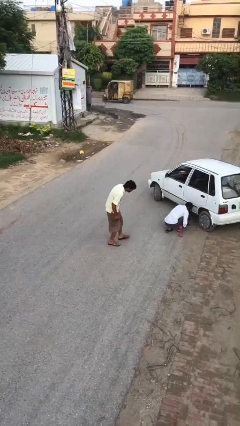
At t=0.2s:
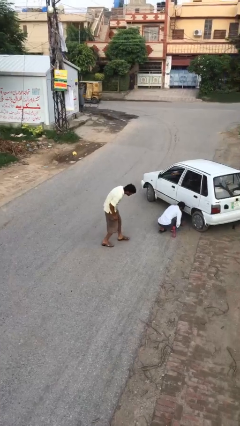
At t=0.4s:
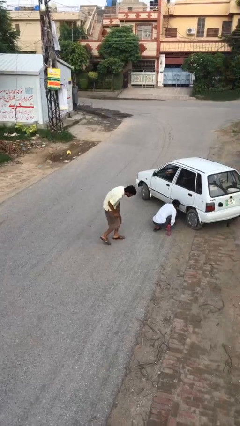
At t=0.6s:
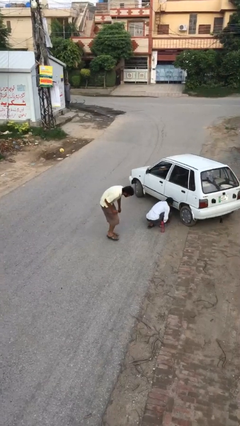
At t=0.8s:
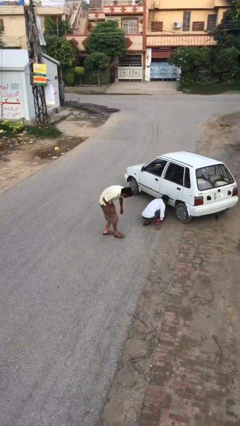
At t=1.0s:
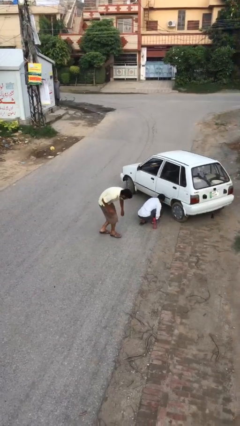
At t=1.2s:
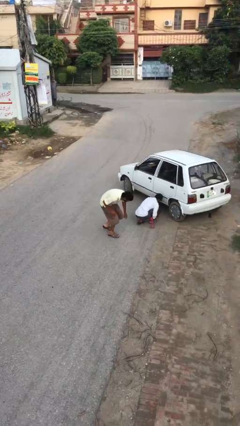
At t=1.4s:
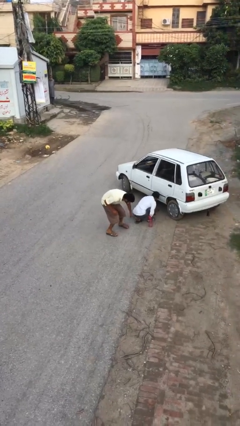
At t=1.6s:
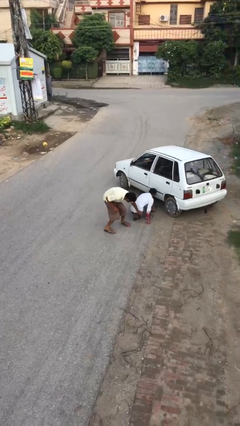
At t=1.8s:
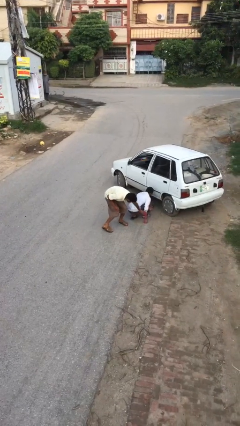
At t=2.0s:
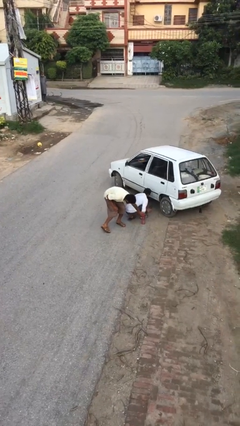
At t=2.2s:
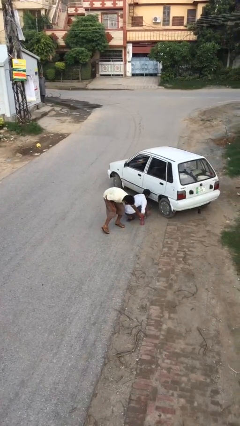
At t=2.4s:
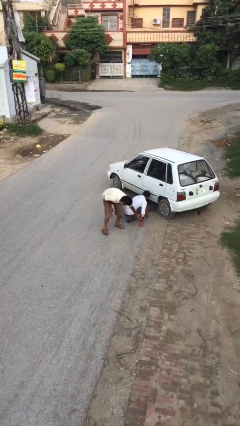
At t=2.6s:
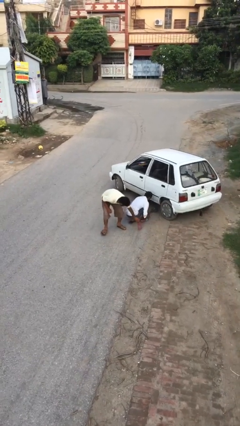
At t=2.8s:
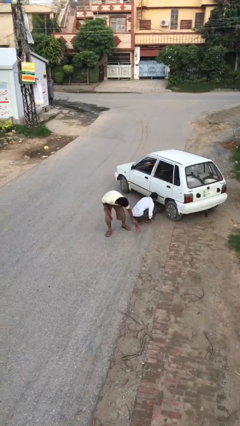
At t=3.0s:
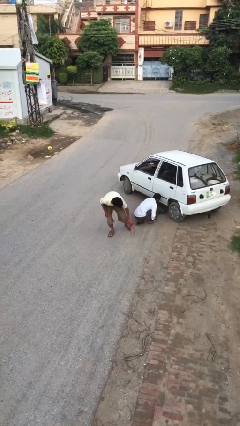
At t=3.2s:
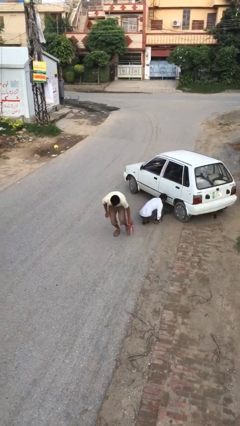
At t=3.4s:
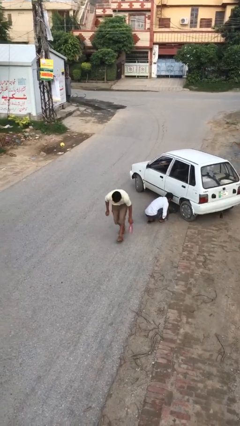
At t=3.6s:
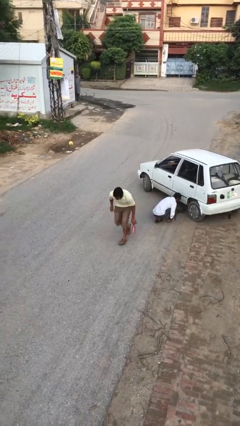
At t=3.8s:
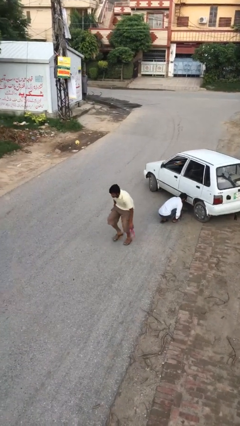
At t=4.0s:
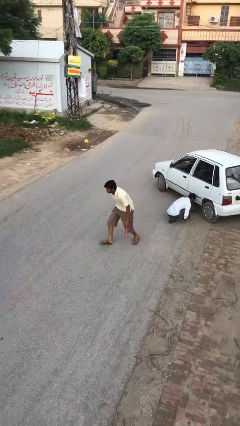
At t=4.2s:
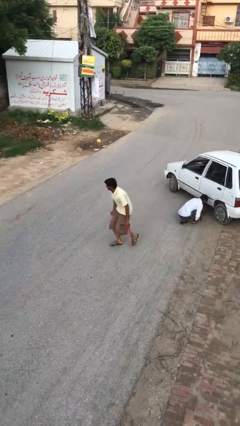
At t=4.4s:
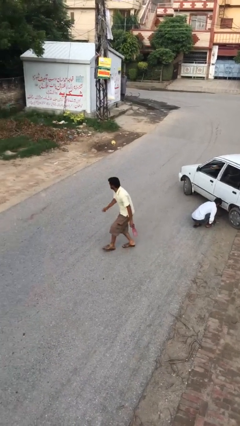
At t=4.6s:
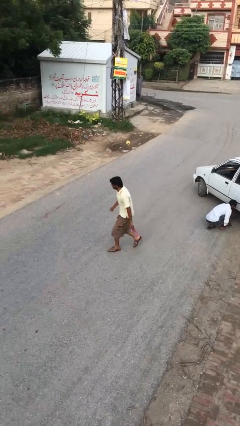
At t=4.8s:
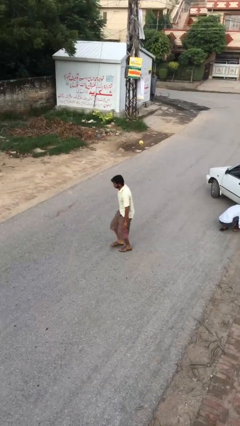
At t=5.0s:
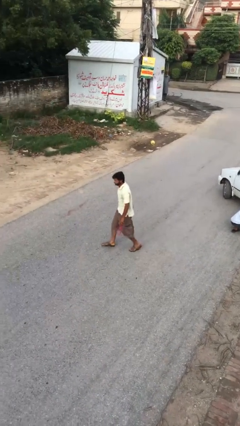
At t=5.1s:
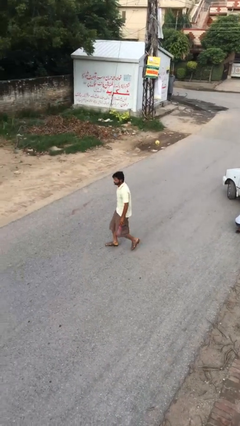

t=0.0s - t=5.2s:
person steals object from person

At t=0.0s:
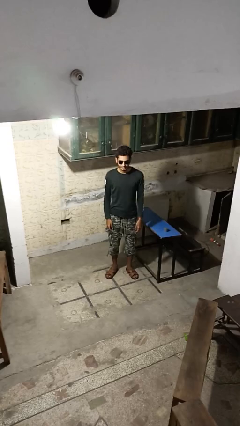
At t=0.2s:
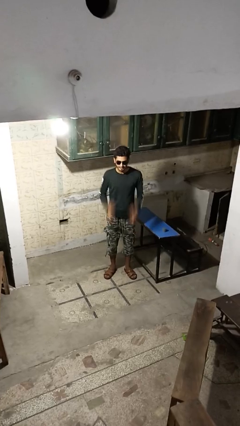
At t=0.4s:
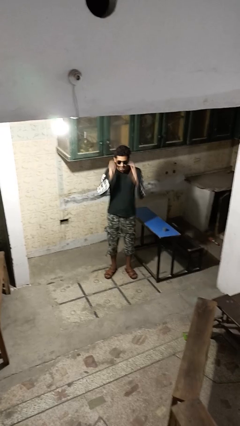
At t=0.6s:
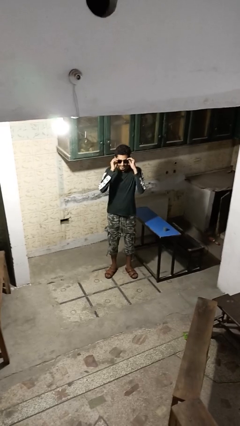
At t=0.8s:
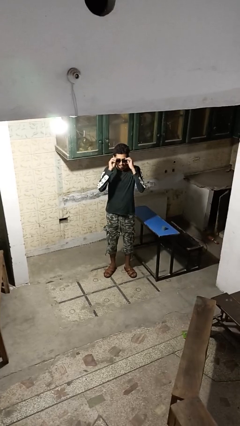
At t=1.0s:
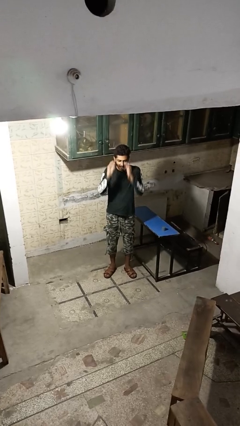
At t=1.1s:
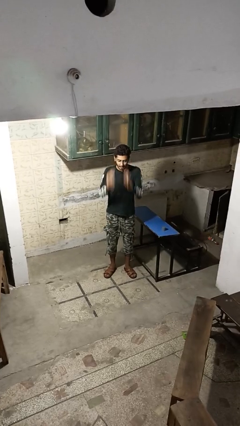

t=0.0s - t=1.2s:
person takes off sunglasses

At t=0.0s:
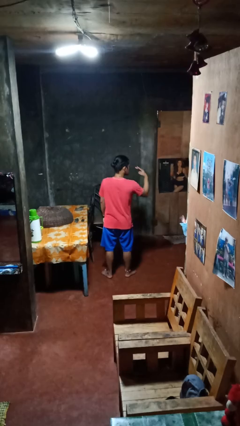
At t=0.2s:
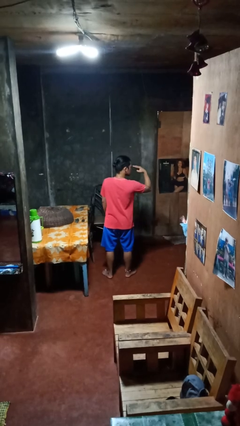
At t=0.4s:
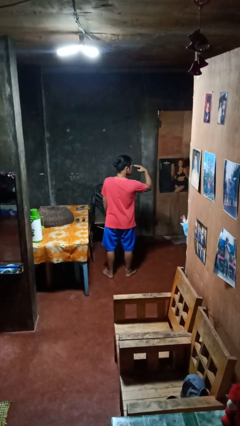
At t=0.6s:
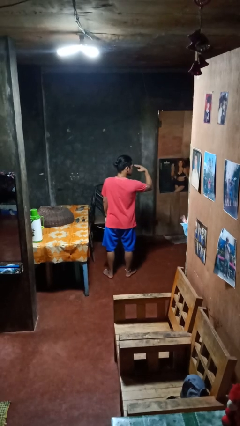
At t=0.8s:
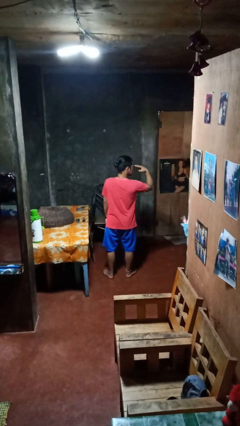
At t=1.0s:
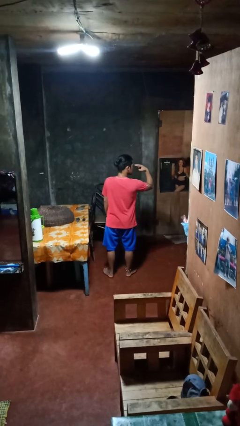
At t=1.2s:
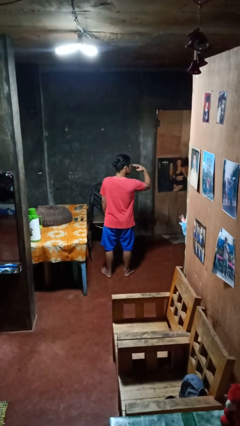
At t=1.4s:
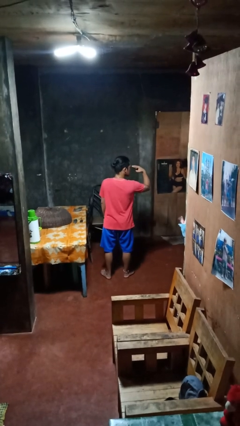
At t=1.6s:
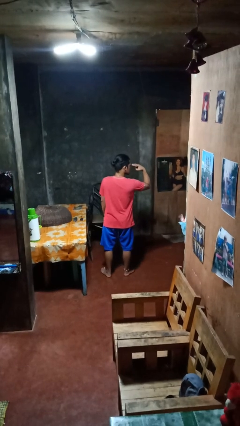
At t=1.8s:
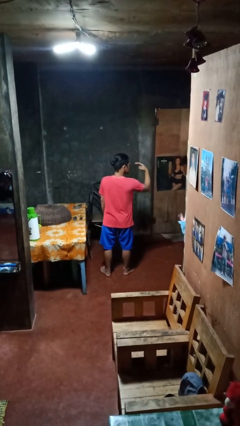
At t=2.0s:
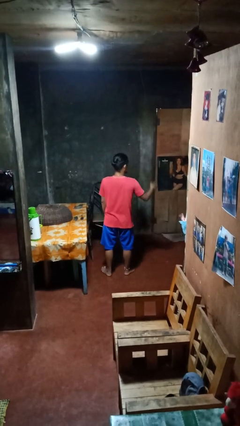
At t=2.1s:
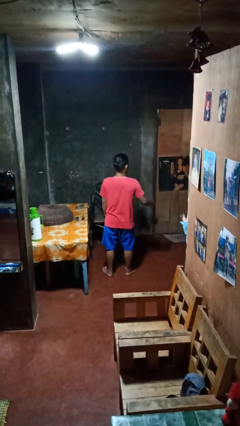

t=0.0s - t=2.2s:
person gestures watch closely

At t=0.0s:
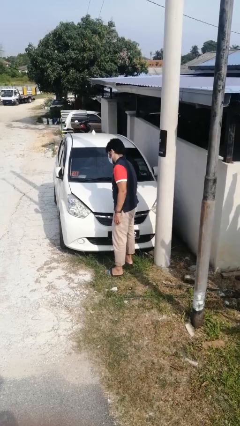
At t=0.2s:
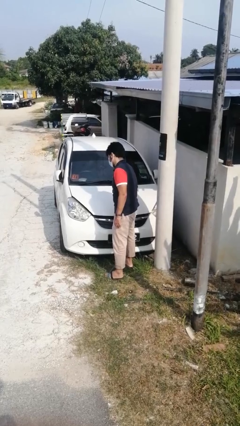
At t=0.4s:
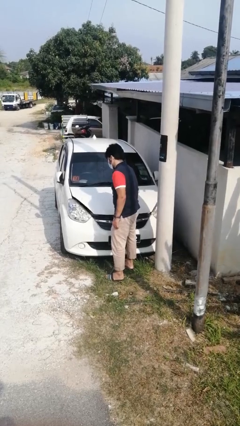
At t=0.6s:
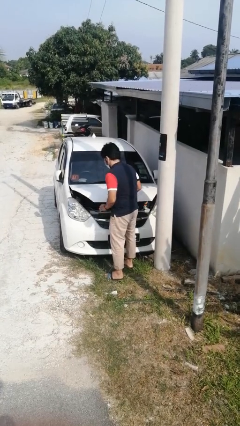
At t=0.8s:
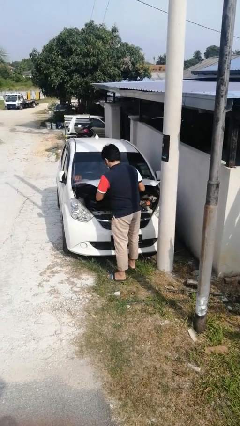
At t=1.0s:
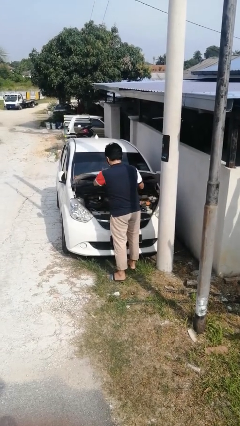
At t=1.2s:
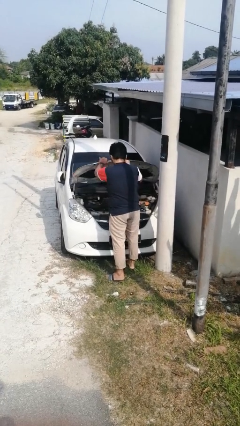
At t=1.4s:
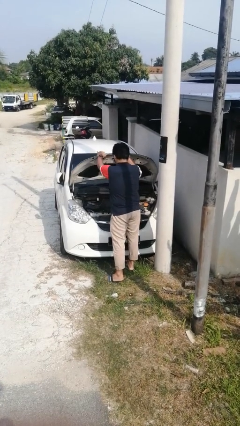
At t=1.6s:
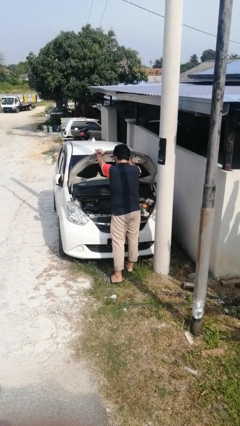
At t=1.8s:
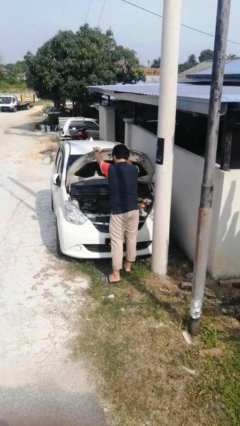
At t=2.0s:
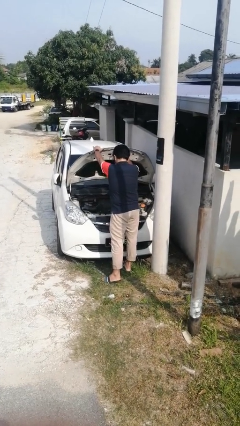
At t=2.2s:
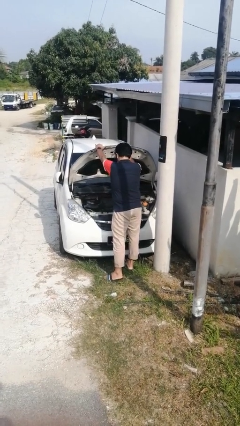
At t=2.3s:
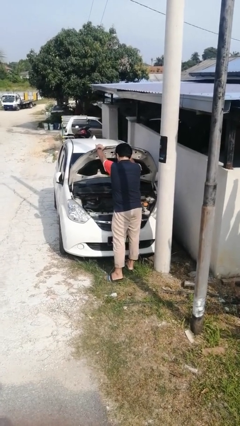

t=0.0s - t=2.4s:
person opens car hood

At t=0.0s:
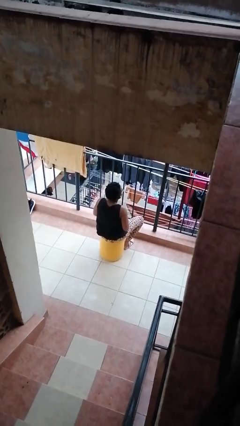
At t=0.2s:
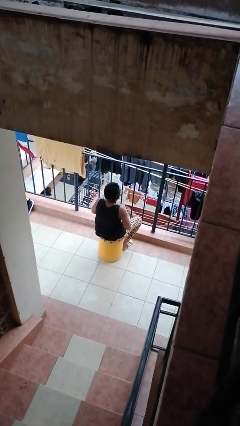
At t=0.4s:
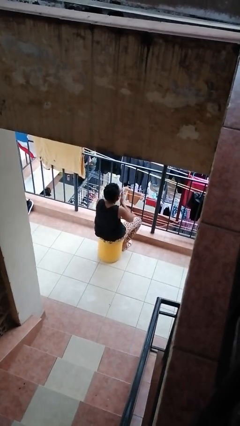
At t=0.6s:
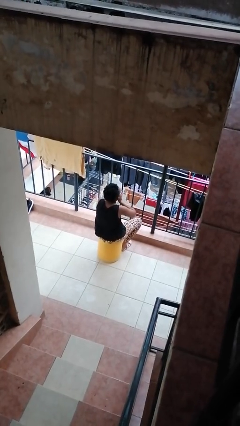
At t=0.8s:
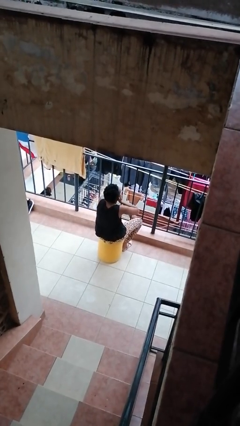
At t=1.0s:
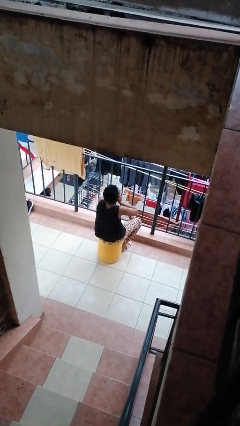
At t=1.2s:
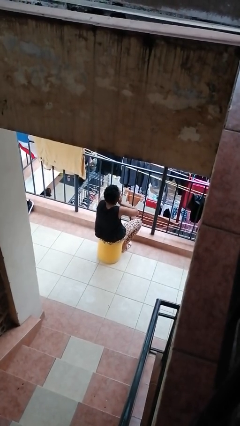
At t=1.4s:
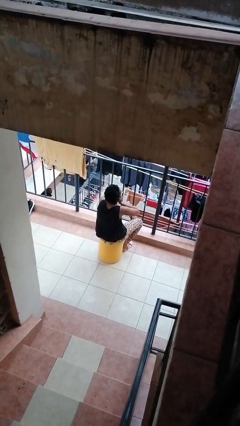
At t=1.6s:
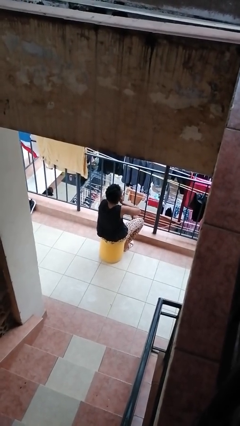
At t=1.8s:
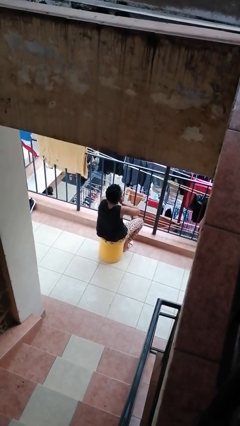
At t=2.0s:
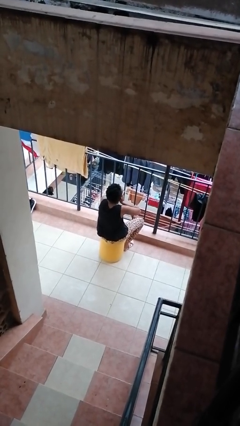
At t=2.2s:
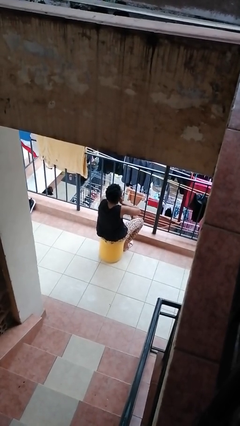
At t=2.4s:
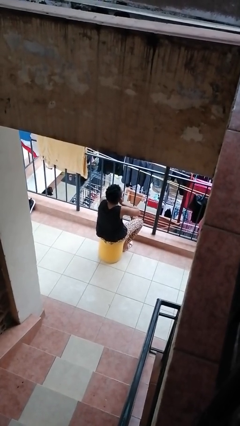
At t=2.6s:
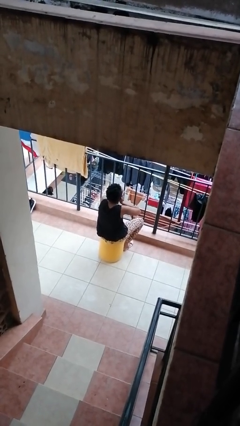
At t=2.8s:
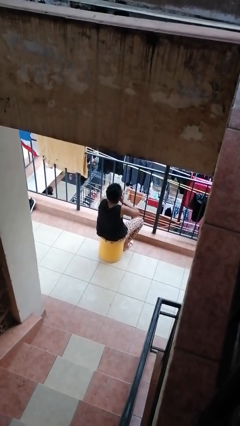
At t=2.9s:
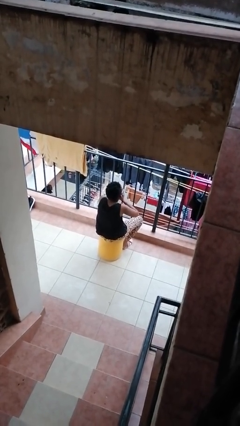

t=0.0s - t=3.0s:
person blows into hands

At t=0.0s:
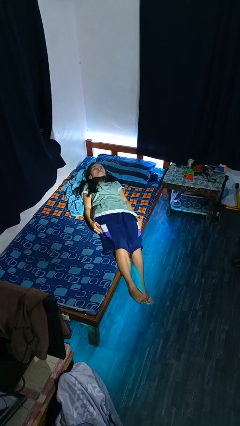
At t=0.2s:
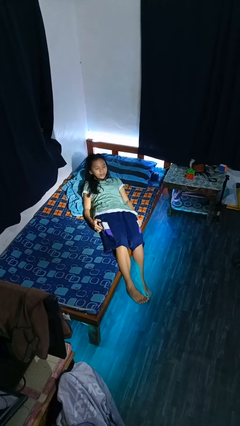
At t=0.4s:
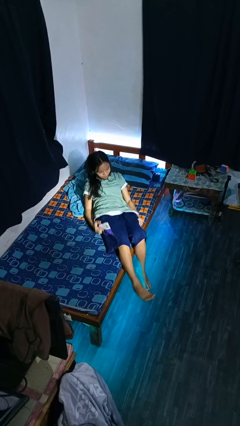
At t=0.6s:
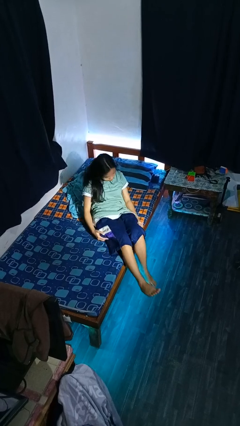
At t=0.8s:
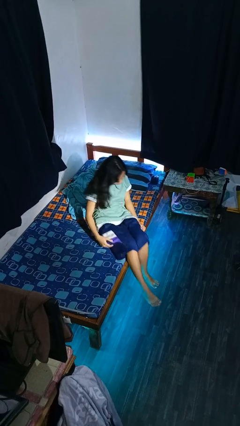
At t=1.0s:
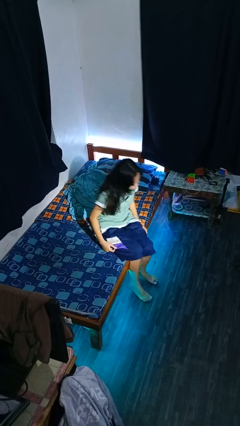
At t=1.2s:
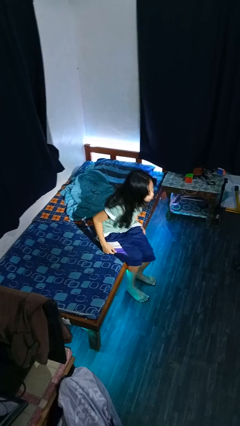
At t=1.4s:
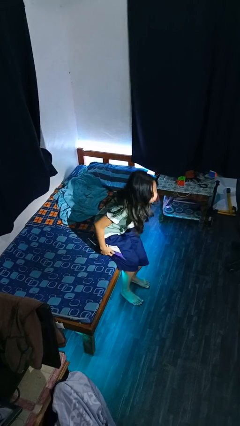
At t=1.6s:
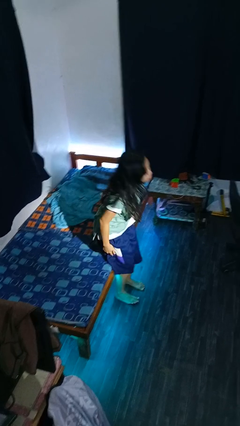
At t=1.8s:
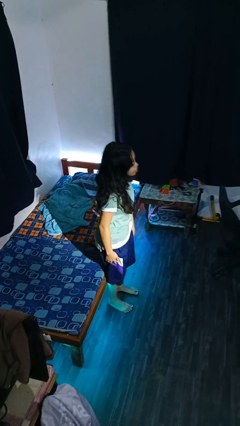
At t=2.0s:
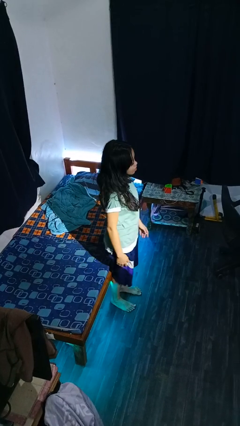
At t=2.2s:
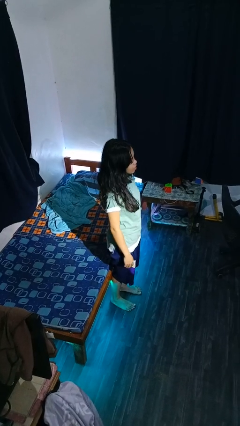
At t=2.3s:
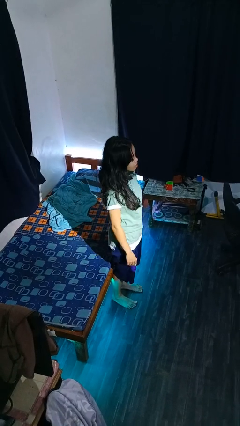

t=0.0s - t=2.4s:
person stands up

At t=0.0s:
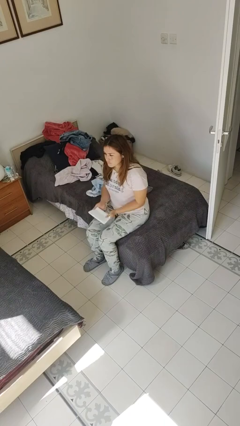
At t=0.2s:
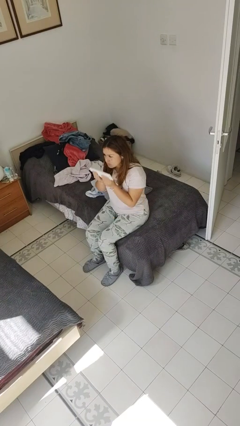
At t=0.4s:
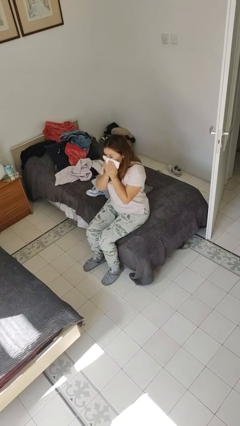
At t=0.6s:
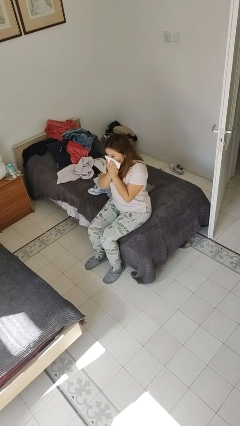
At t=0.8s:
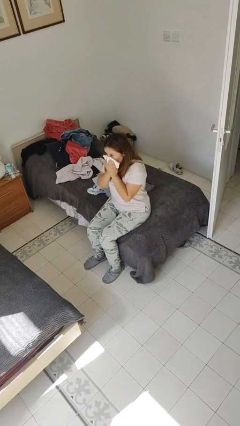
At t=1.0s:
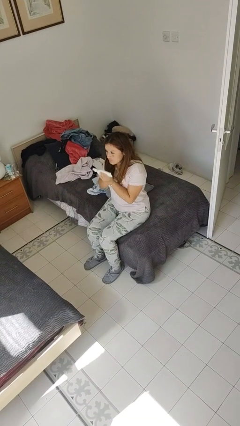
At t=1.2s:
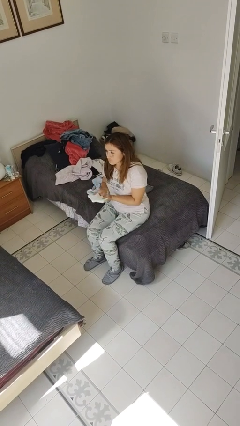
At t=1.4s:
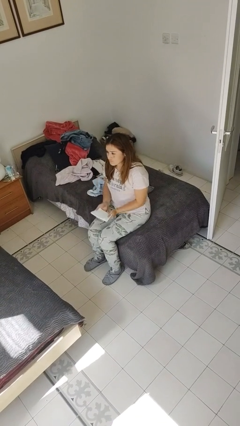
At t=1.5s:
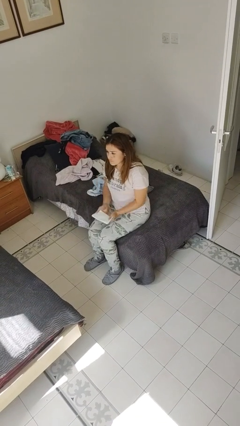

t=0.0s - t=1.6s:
person blows nose
